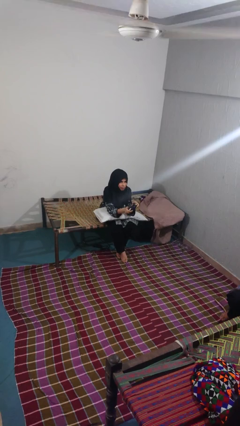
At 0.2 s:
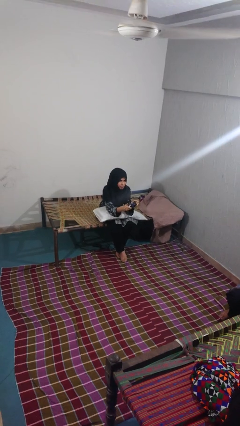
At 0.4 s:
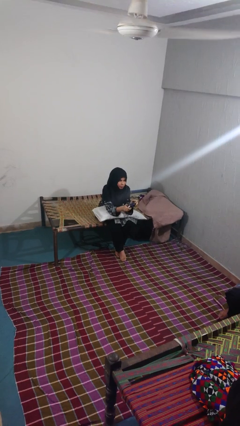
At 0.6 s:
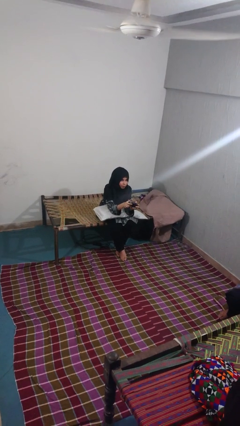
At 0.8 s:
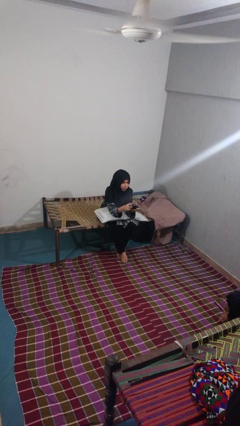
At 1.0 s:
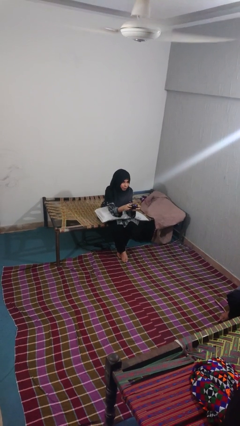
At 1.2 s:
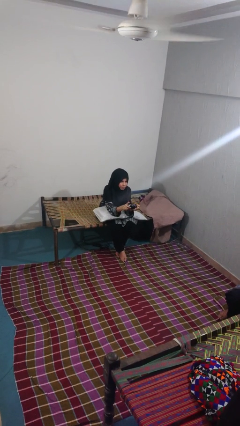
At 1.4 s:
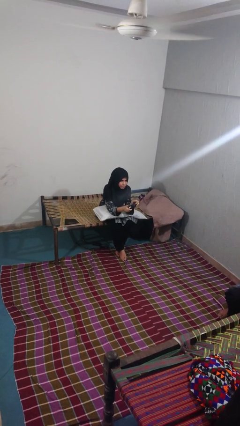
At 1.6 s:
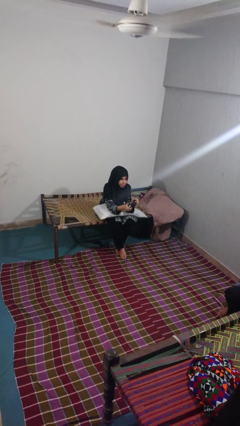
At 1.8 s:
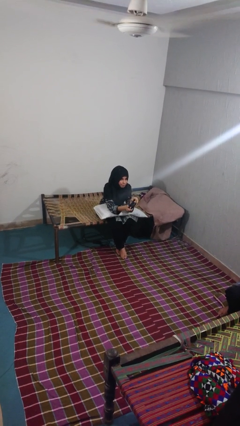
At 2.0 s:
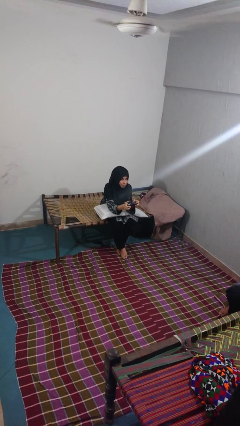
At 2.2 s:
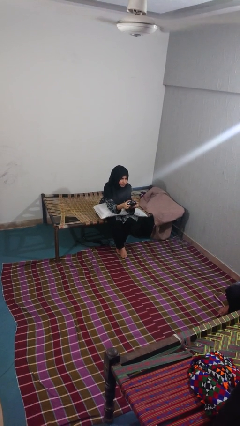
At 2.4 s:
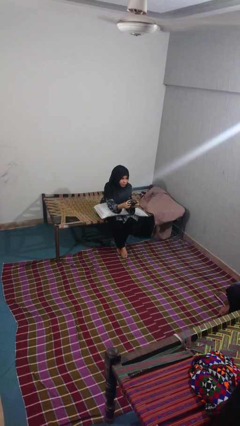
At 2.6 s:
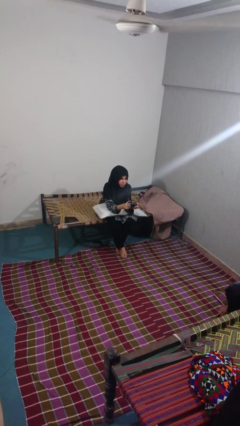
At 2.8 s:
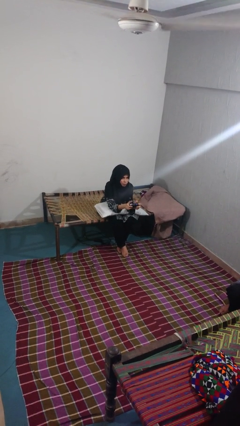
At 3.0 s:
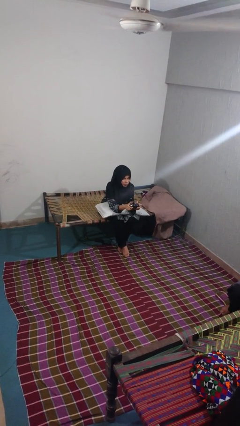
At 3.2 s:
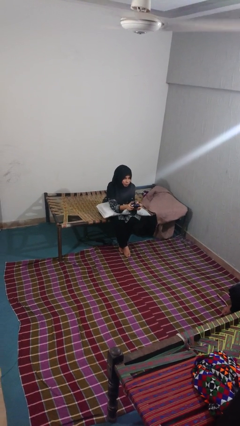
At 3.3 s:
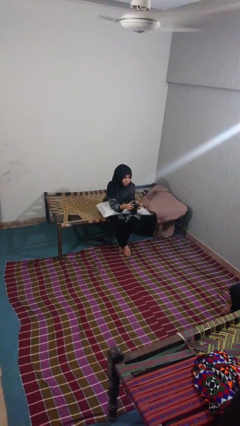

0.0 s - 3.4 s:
person interacts with handheld game

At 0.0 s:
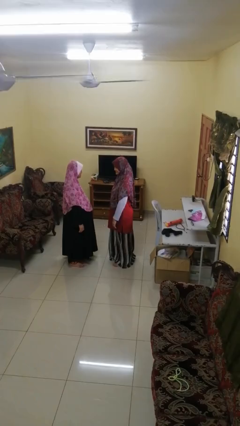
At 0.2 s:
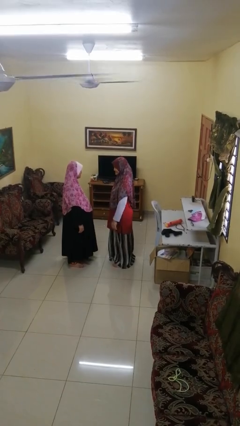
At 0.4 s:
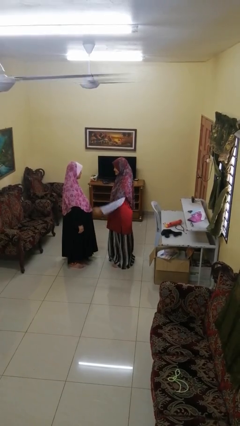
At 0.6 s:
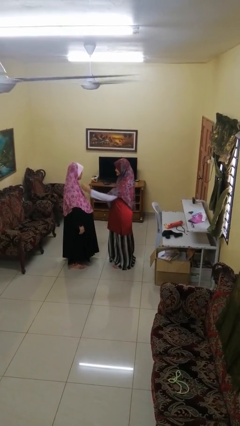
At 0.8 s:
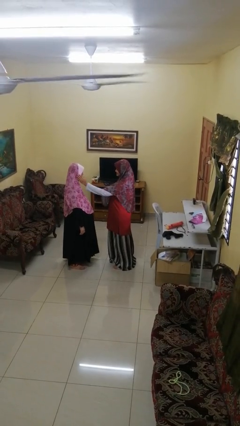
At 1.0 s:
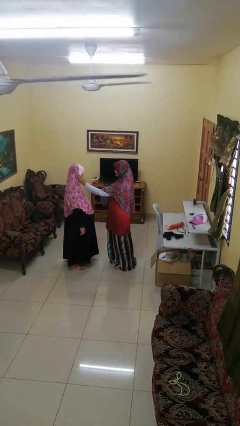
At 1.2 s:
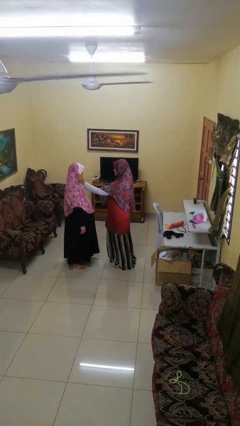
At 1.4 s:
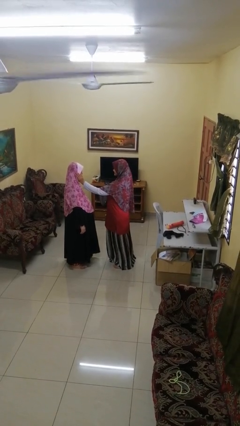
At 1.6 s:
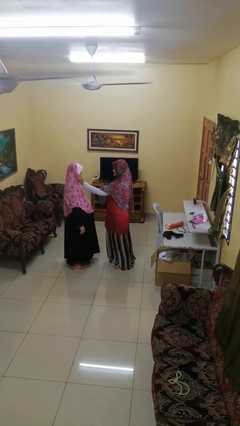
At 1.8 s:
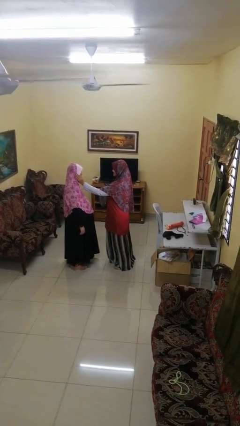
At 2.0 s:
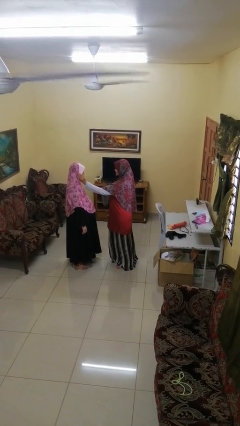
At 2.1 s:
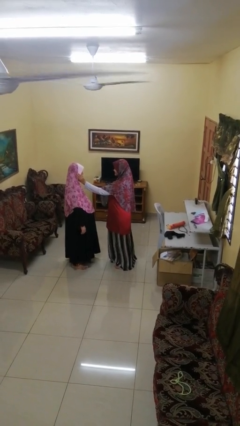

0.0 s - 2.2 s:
person touches face of person

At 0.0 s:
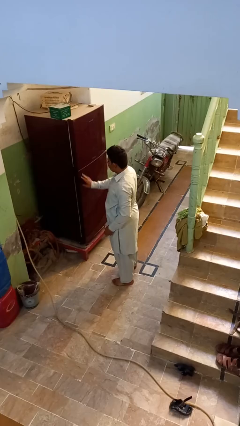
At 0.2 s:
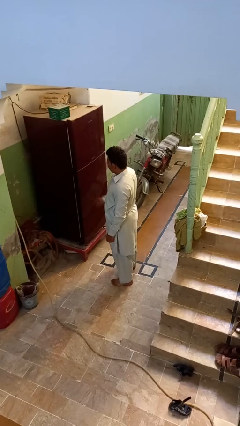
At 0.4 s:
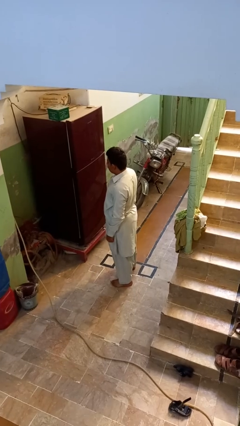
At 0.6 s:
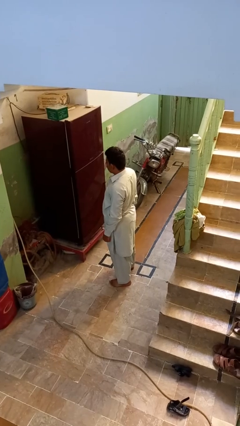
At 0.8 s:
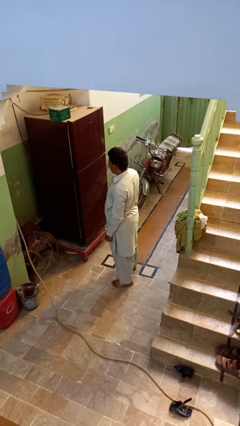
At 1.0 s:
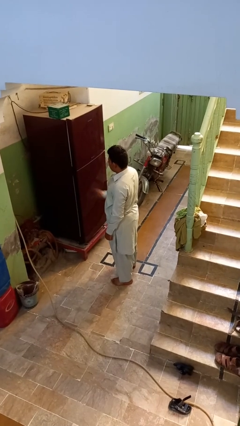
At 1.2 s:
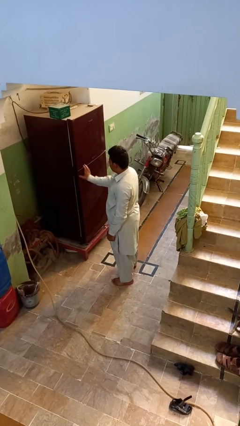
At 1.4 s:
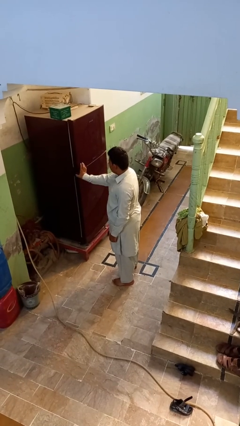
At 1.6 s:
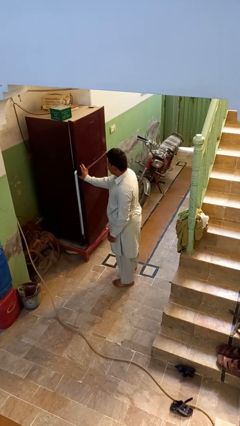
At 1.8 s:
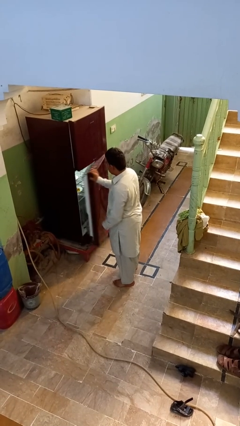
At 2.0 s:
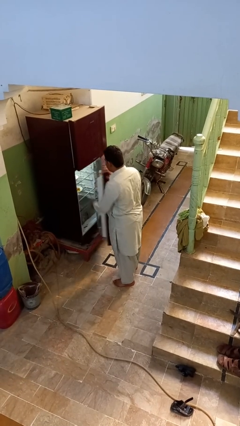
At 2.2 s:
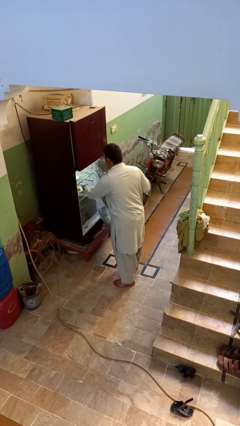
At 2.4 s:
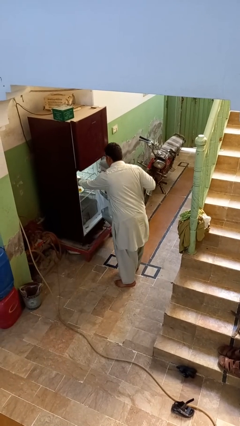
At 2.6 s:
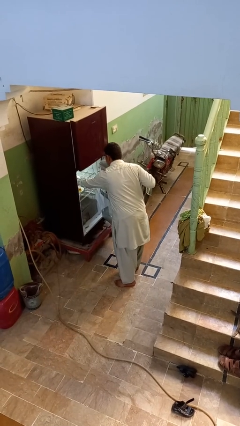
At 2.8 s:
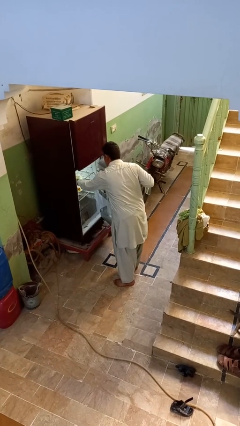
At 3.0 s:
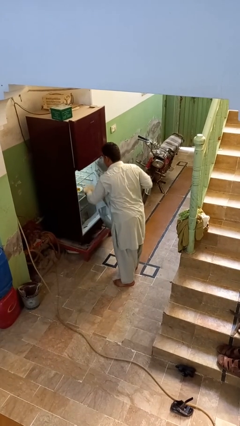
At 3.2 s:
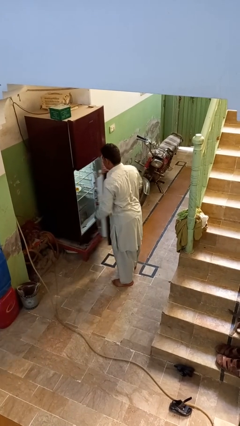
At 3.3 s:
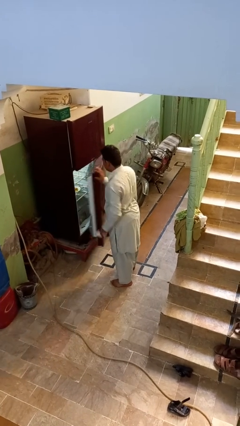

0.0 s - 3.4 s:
person takes object from refrigerator

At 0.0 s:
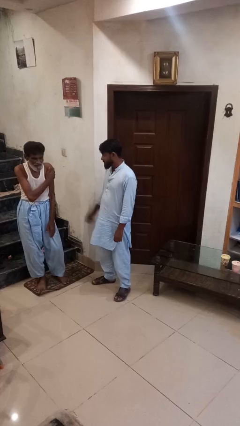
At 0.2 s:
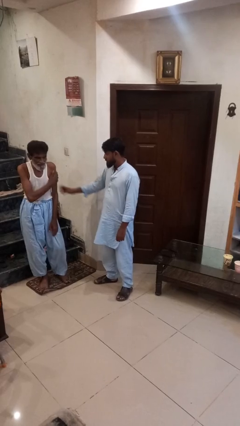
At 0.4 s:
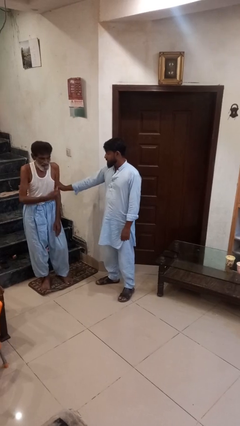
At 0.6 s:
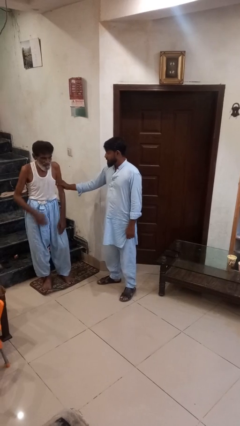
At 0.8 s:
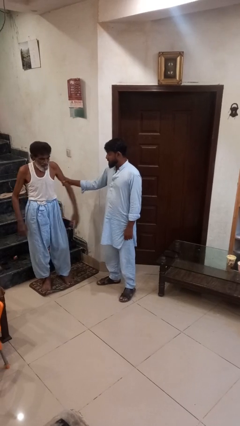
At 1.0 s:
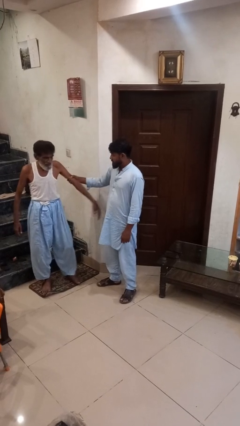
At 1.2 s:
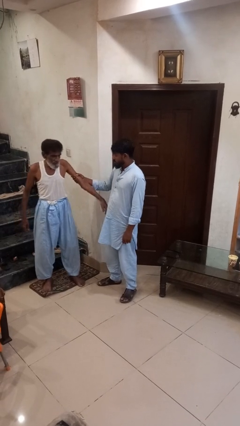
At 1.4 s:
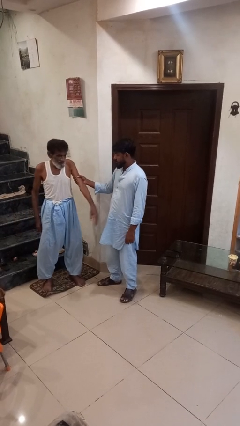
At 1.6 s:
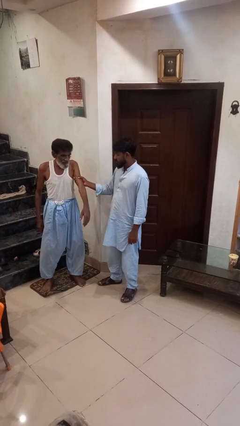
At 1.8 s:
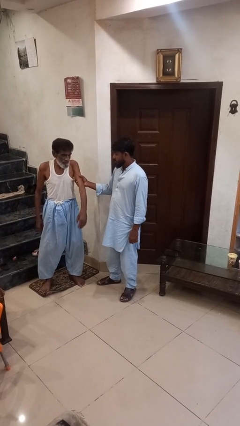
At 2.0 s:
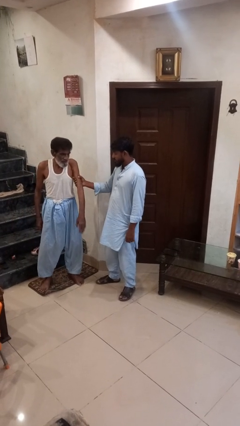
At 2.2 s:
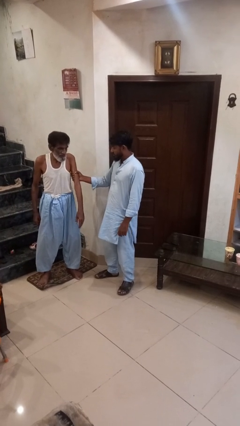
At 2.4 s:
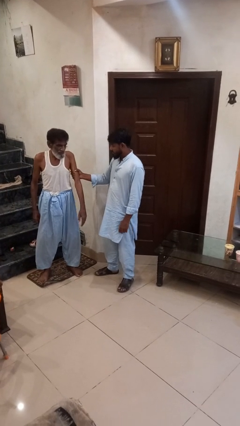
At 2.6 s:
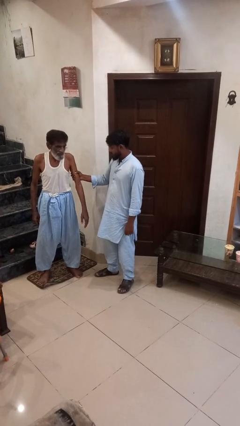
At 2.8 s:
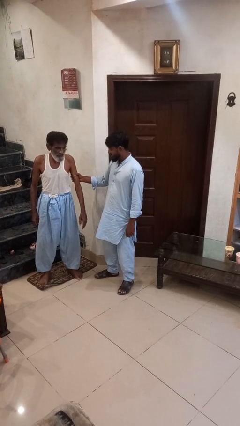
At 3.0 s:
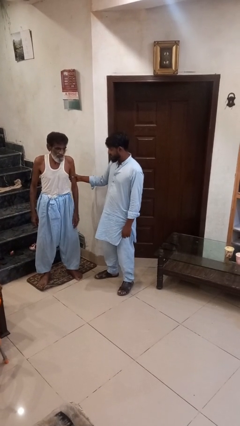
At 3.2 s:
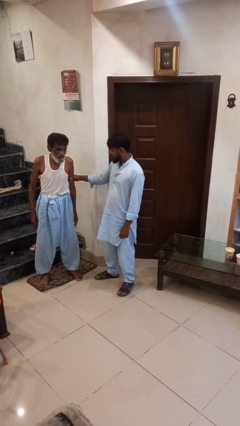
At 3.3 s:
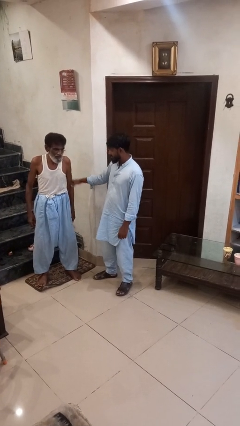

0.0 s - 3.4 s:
person grabs person by bicep

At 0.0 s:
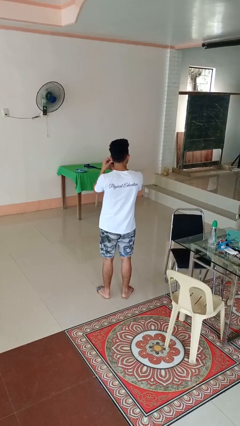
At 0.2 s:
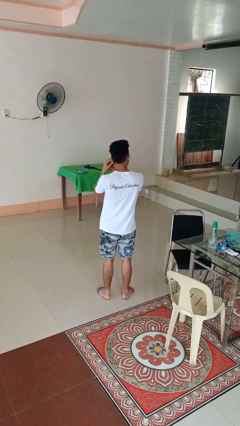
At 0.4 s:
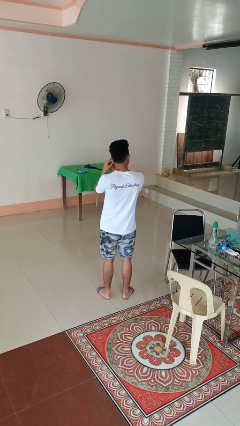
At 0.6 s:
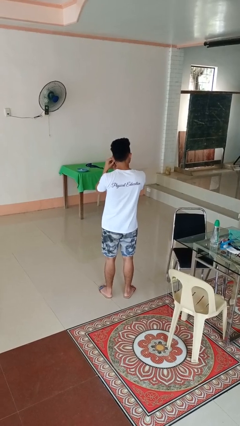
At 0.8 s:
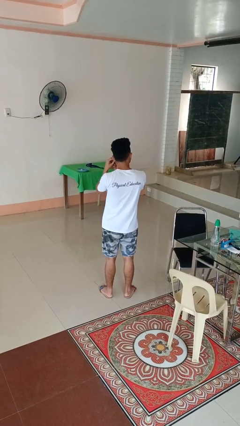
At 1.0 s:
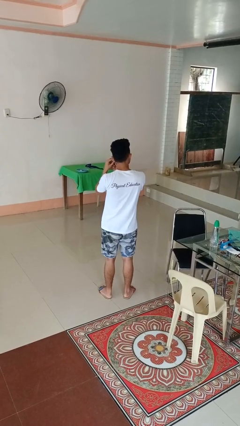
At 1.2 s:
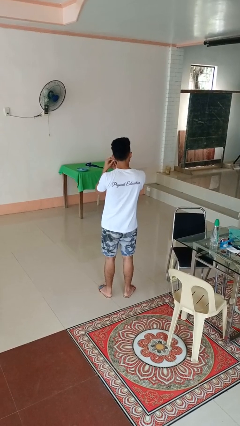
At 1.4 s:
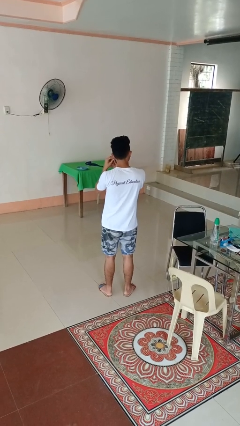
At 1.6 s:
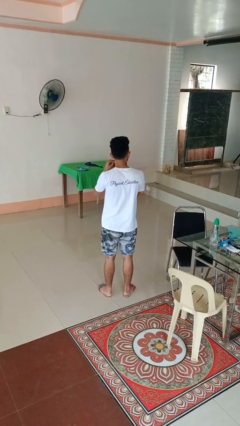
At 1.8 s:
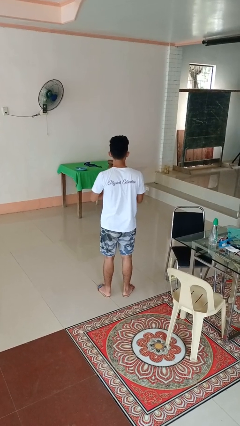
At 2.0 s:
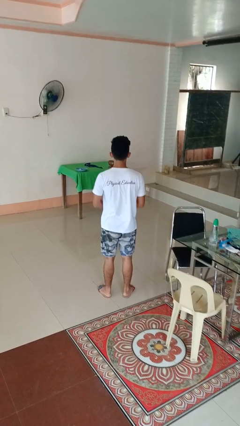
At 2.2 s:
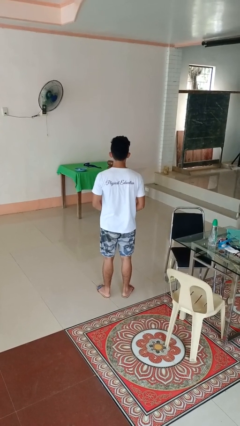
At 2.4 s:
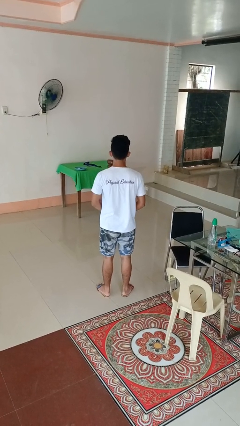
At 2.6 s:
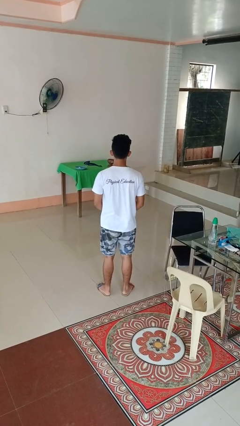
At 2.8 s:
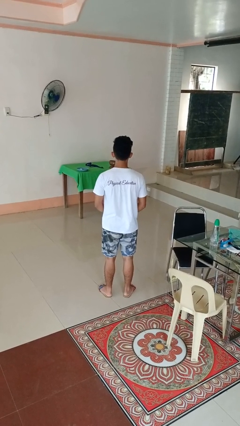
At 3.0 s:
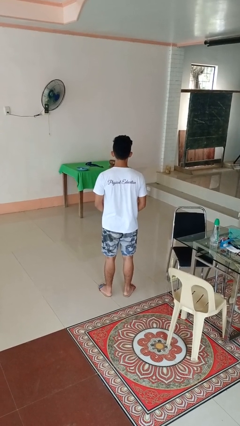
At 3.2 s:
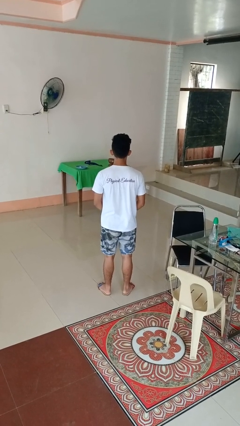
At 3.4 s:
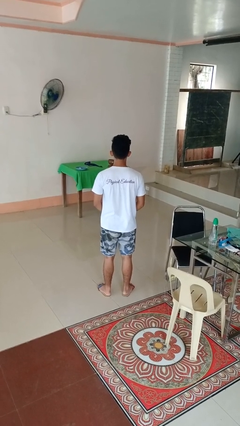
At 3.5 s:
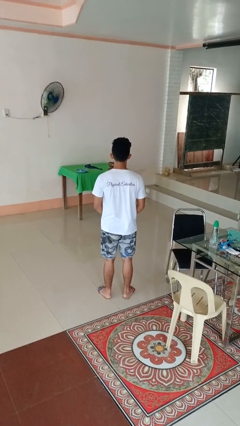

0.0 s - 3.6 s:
person takes off earrings

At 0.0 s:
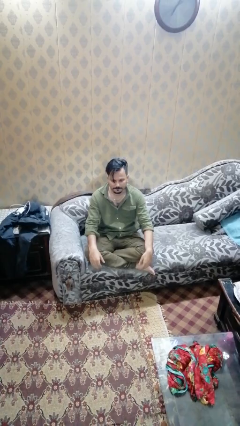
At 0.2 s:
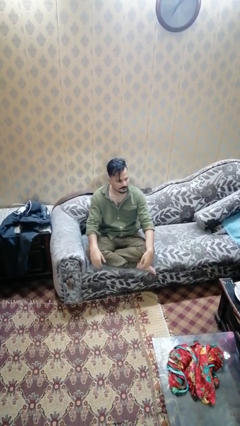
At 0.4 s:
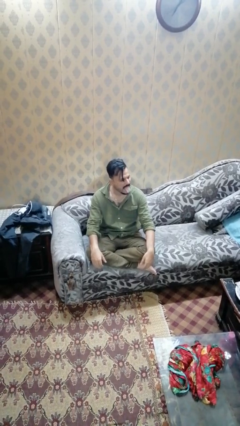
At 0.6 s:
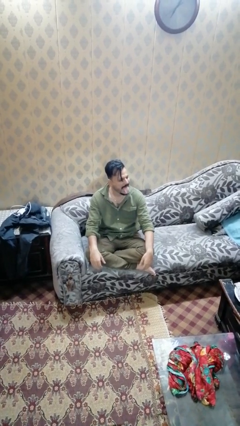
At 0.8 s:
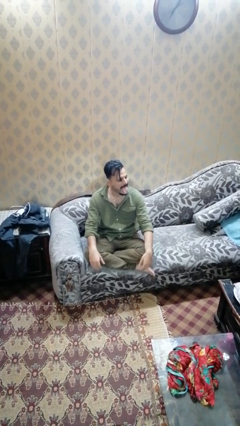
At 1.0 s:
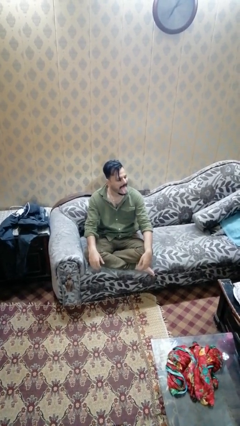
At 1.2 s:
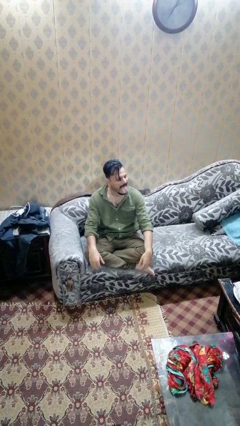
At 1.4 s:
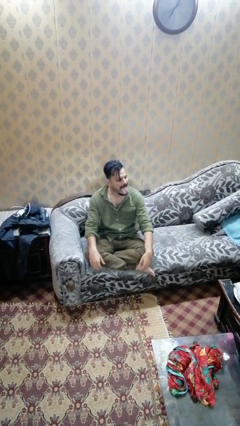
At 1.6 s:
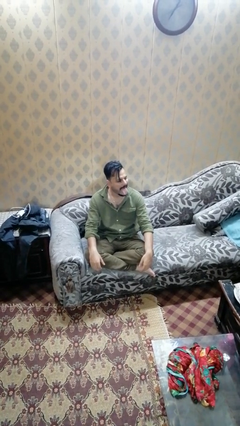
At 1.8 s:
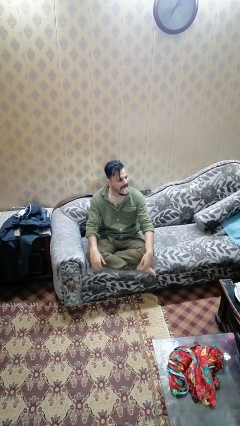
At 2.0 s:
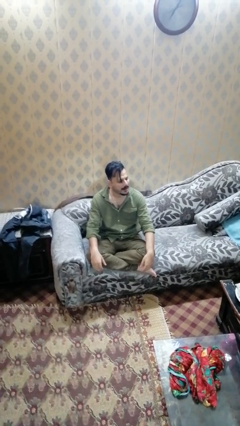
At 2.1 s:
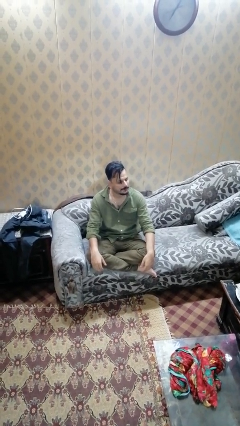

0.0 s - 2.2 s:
person sticks out tongue
